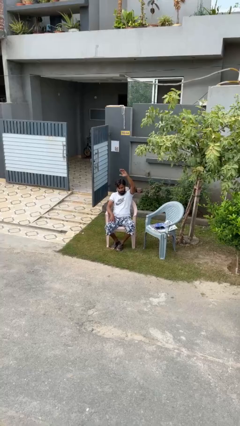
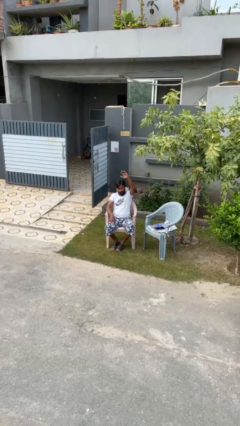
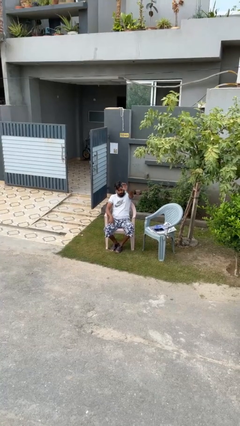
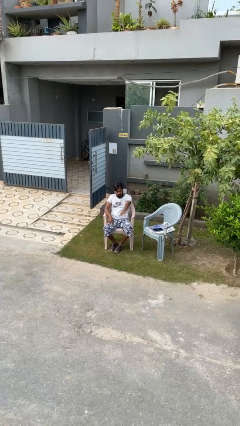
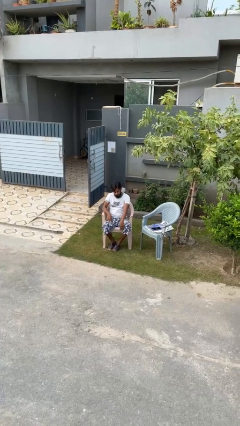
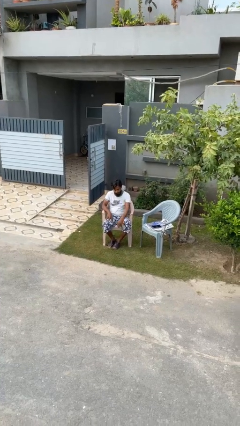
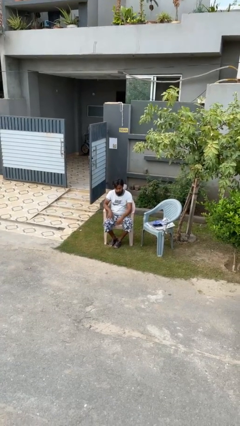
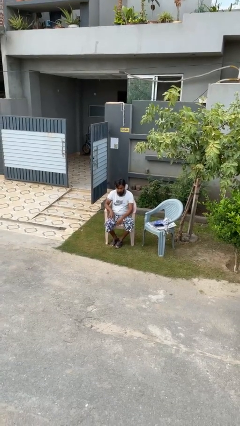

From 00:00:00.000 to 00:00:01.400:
person gestures swipe down

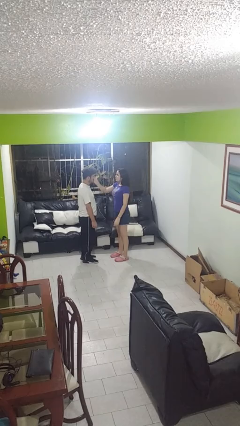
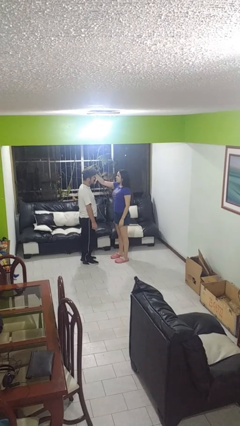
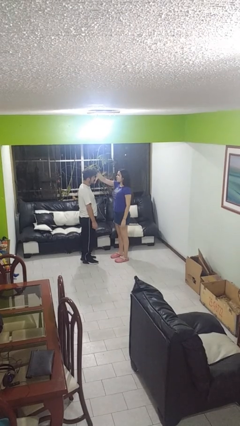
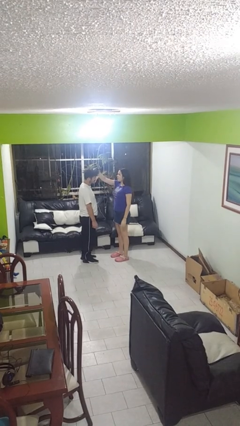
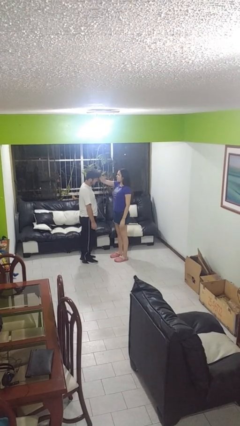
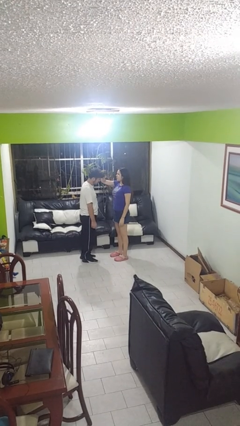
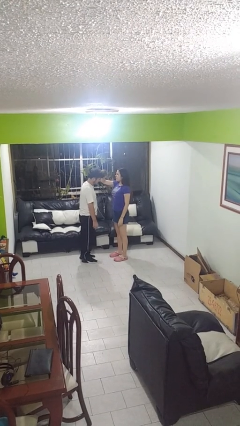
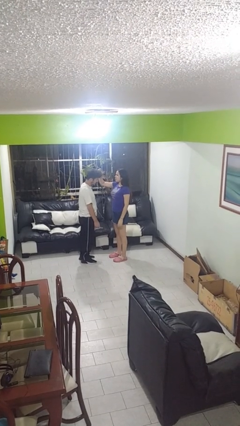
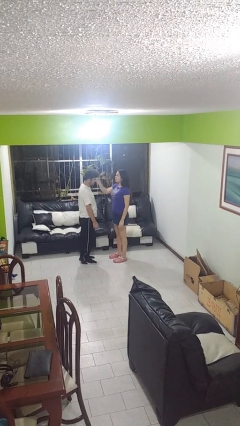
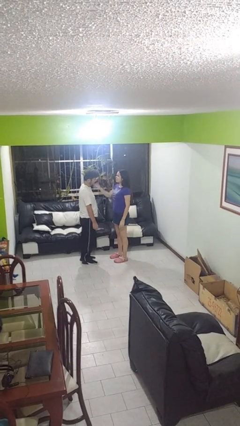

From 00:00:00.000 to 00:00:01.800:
person grabs person by hair

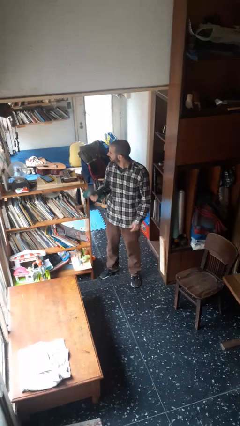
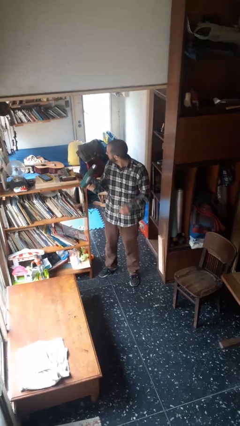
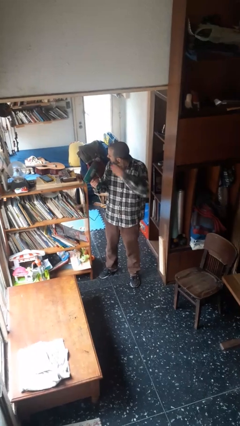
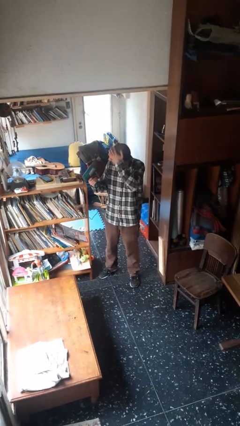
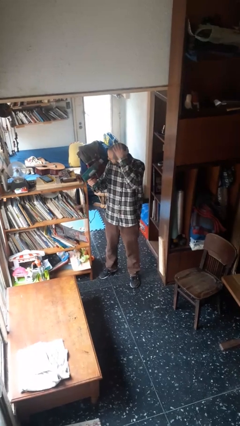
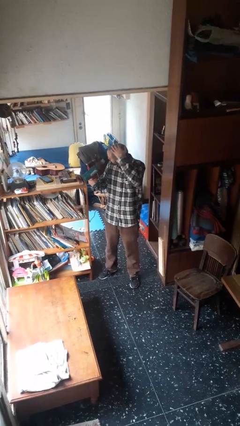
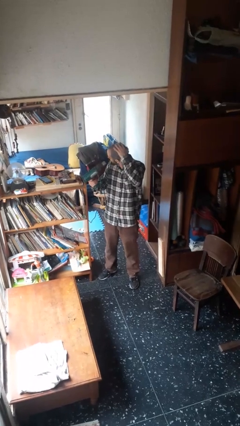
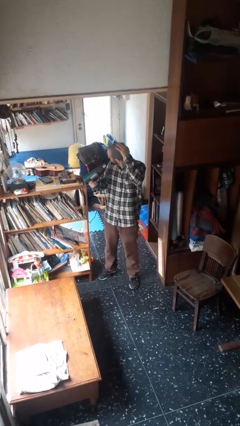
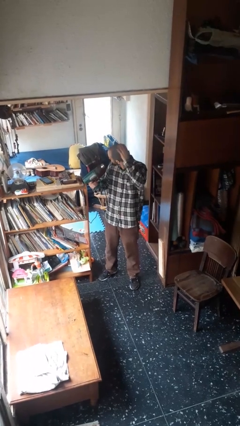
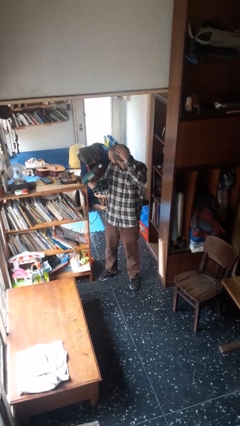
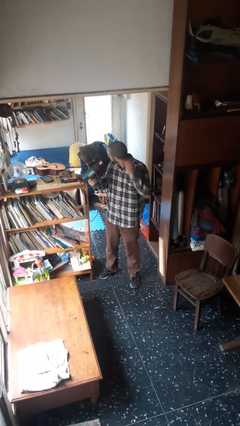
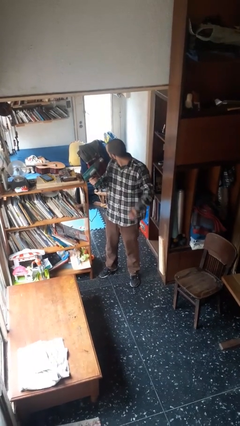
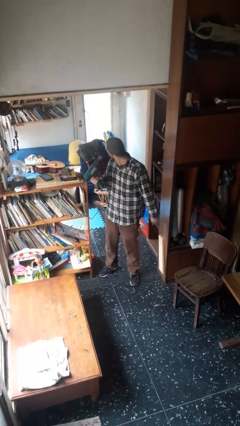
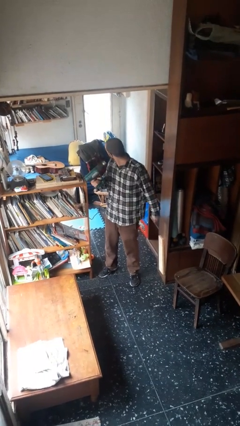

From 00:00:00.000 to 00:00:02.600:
person dries hair with hairdryer

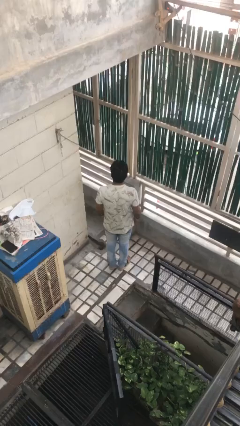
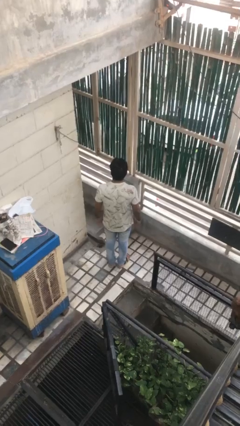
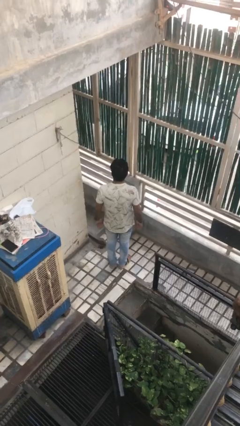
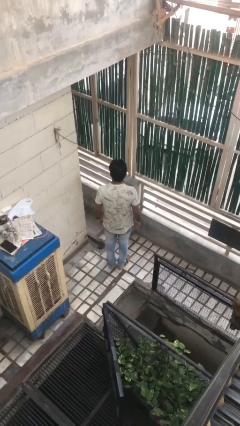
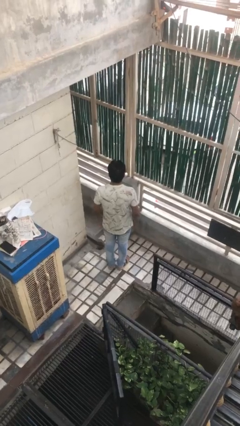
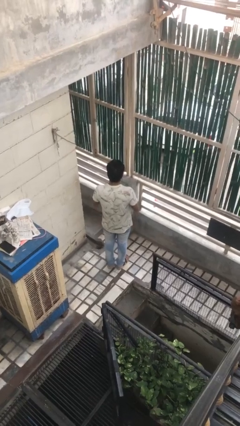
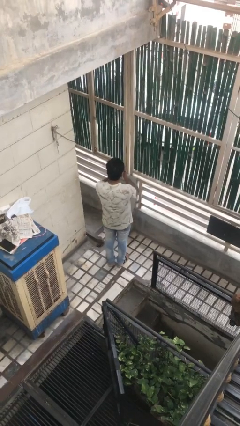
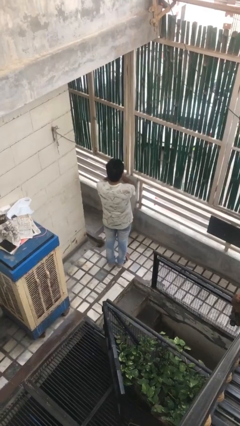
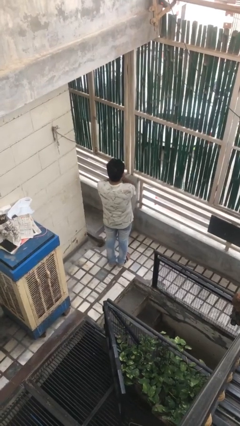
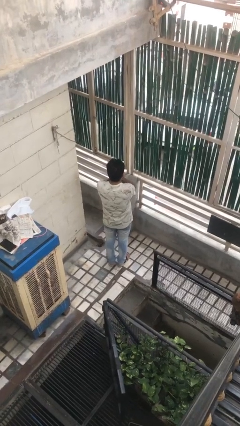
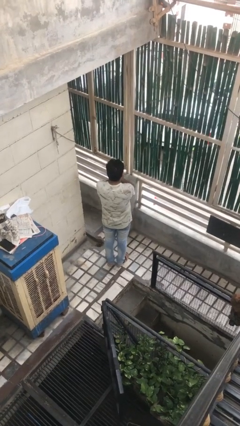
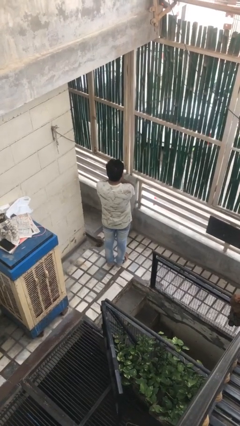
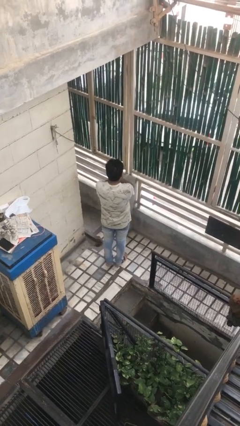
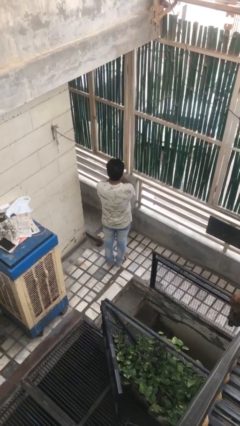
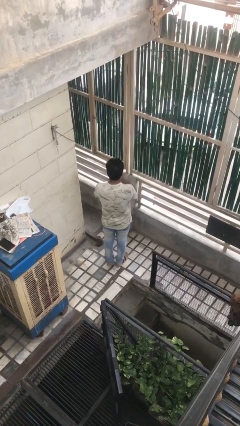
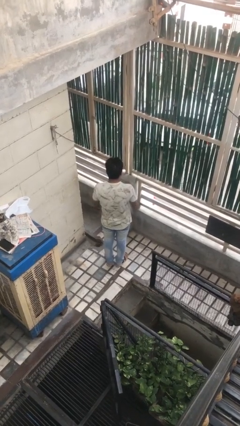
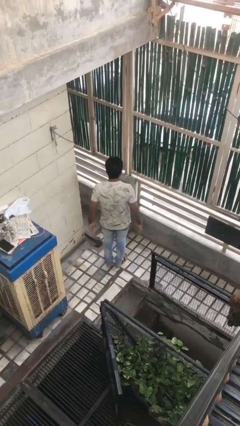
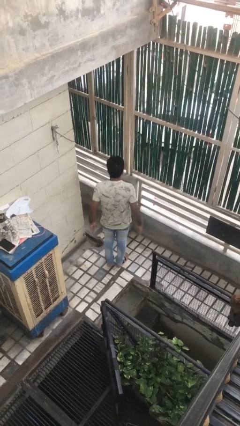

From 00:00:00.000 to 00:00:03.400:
person covers face with hands

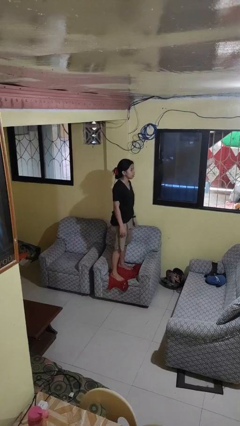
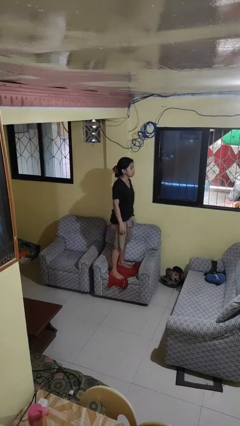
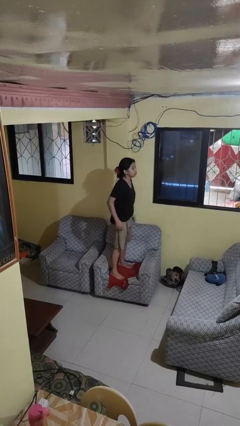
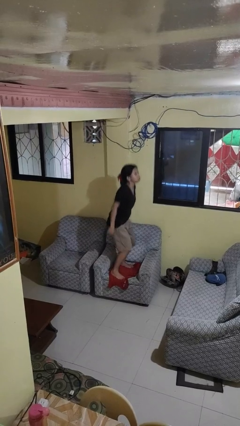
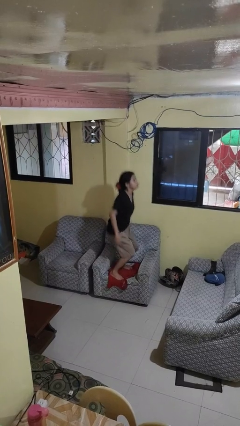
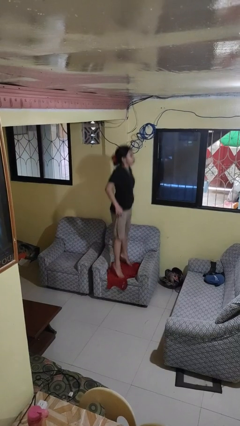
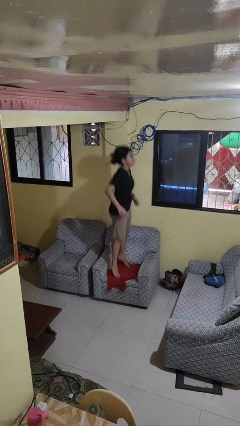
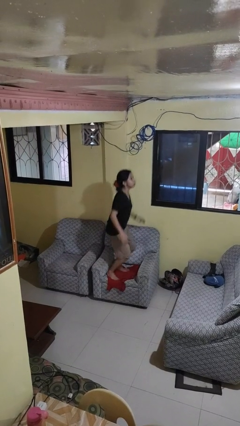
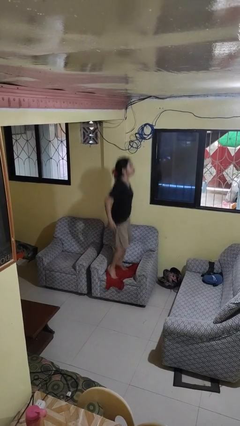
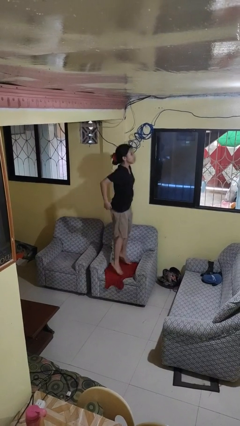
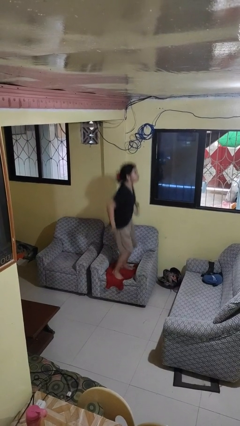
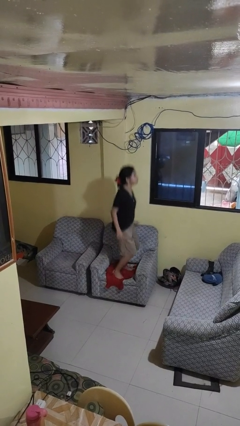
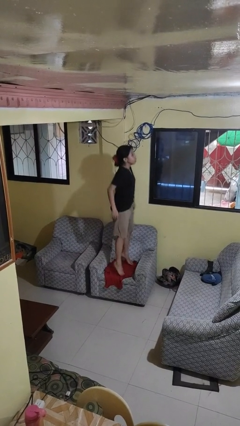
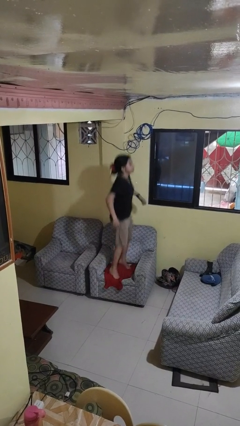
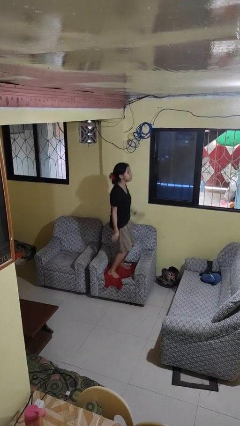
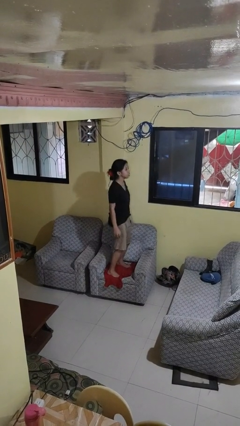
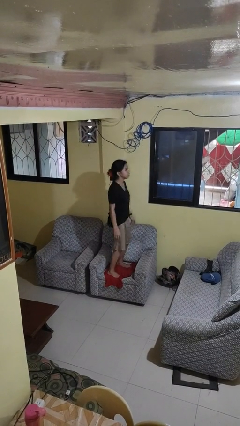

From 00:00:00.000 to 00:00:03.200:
person jumps on couch

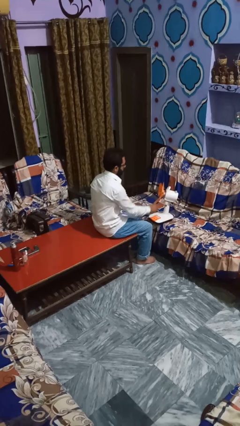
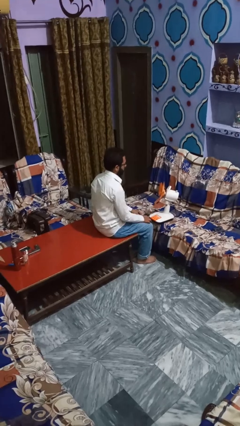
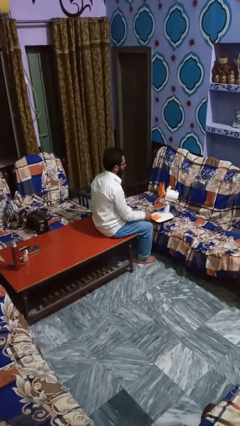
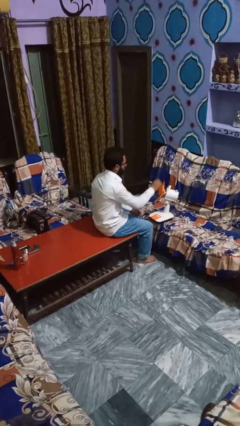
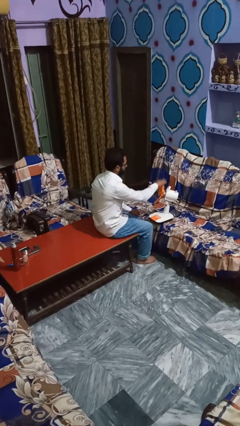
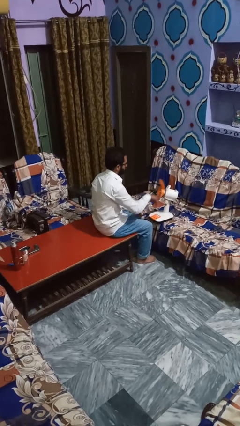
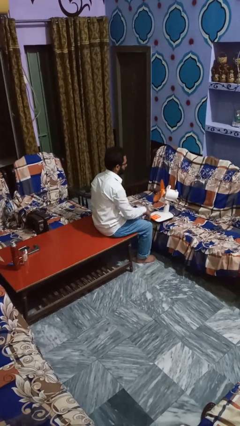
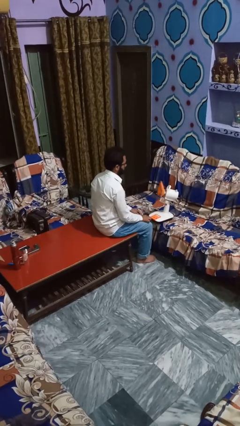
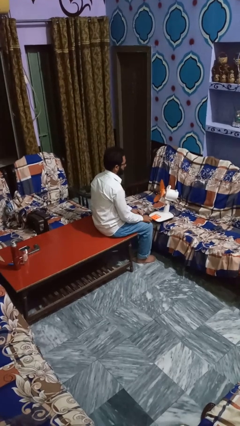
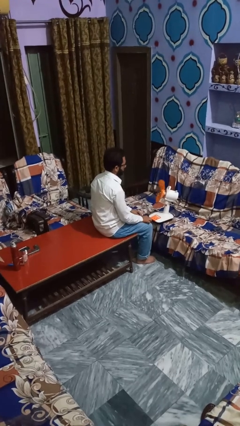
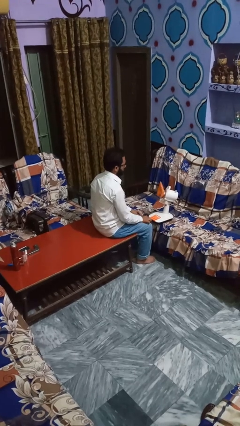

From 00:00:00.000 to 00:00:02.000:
person turns on fan

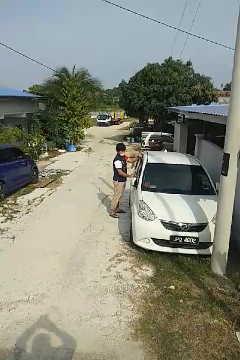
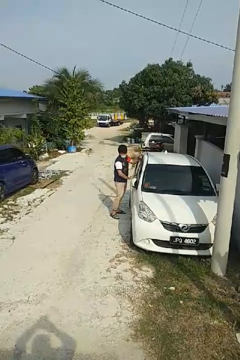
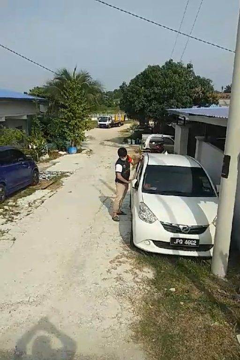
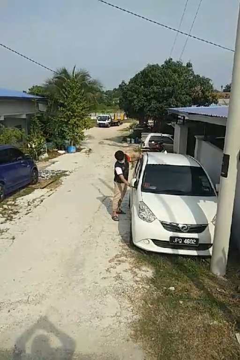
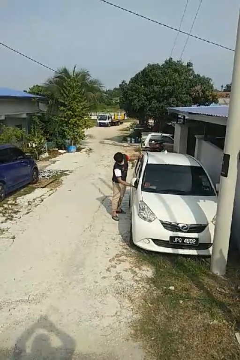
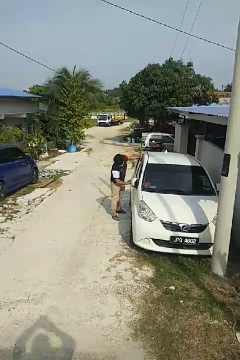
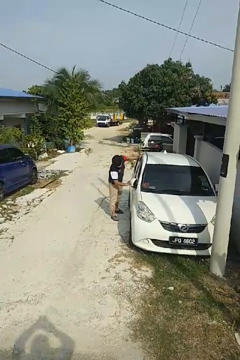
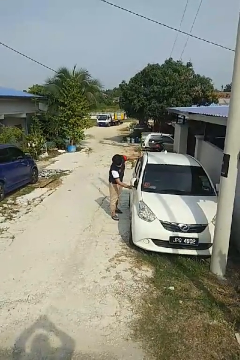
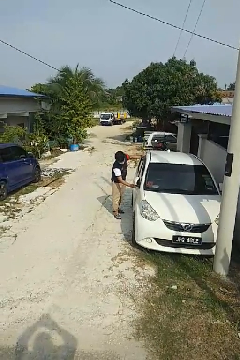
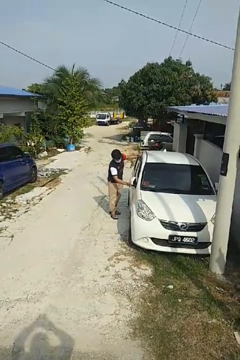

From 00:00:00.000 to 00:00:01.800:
person polishes car with rag

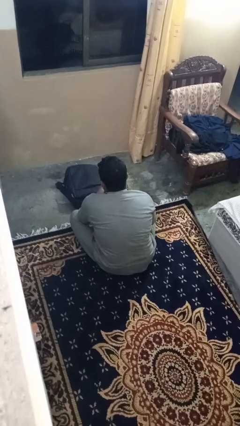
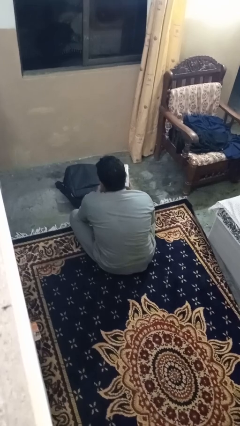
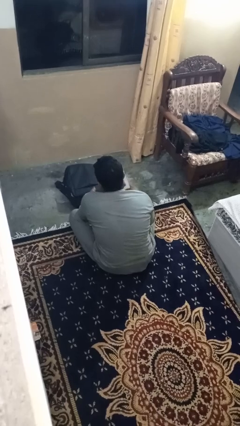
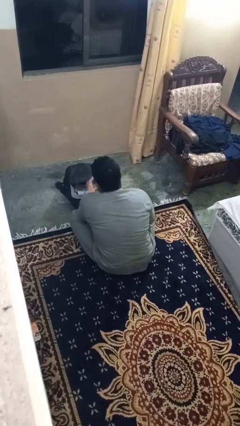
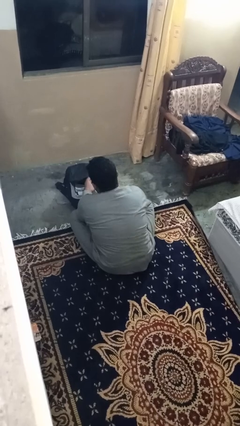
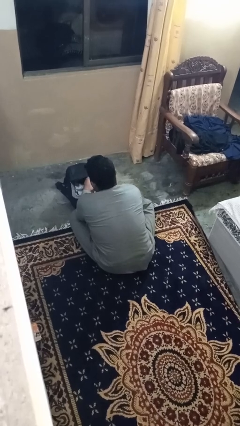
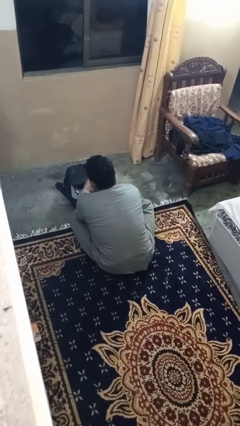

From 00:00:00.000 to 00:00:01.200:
person puts object into bag
